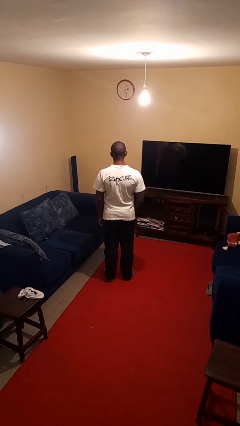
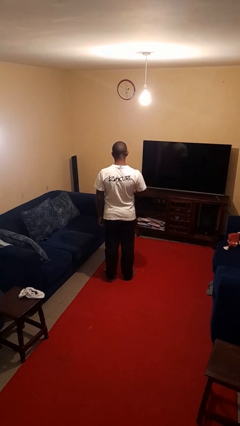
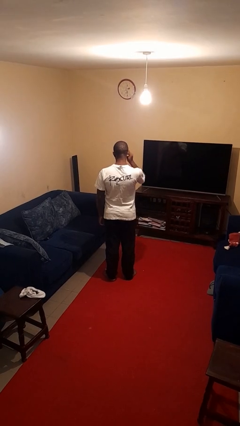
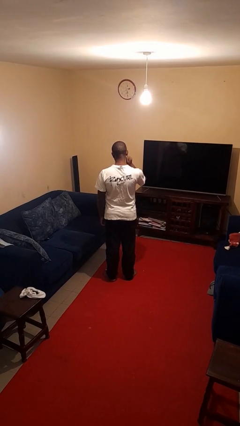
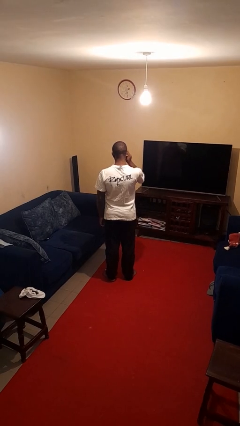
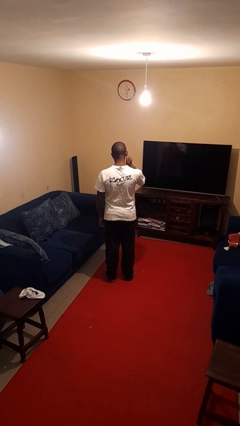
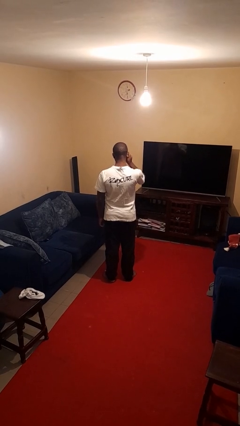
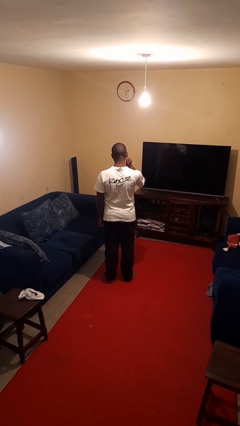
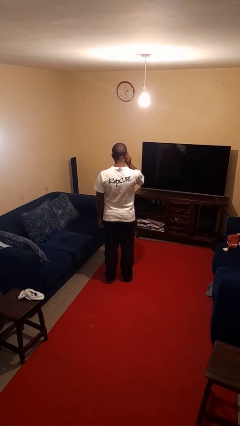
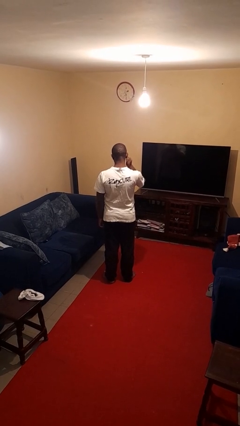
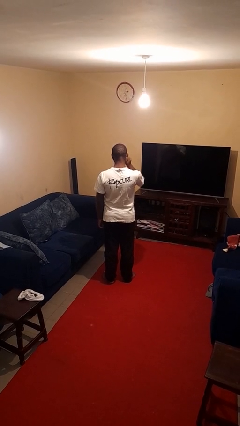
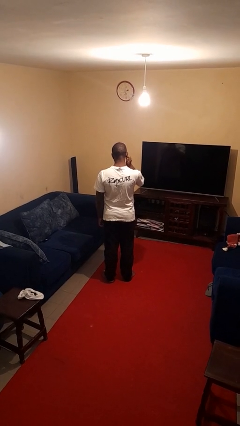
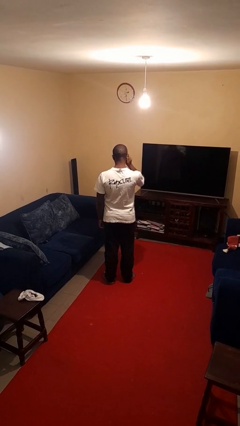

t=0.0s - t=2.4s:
person touches earlobe

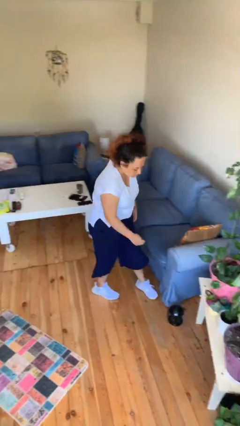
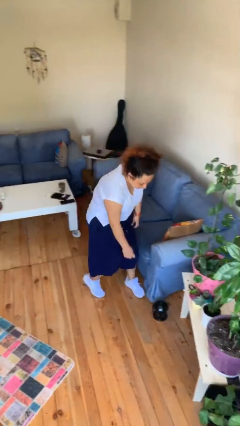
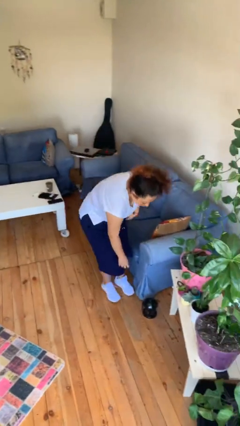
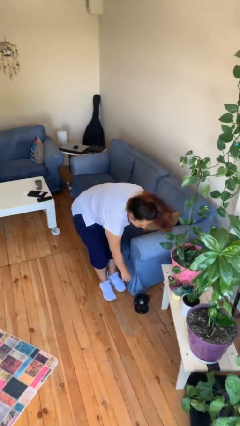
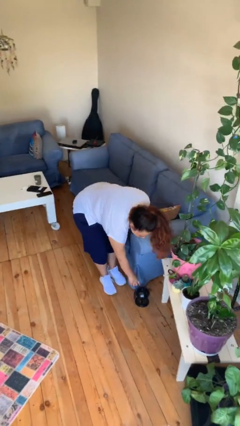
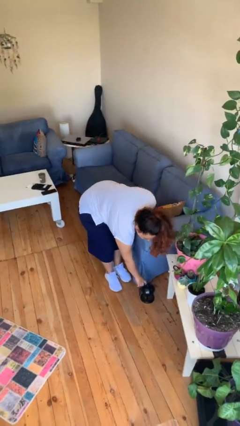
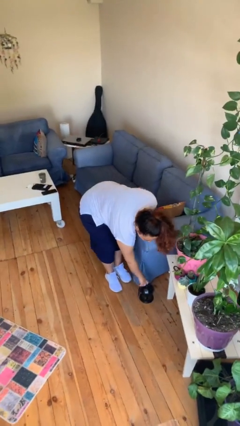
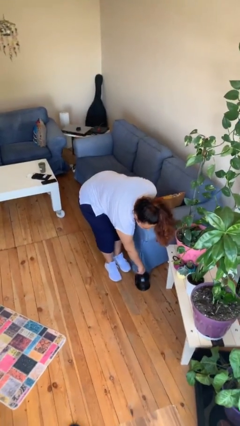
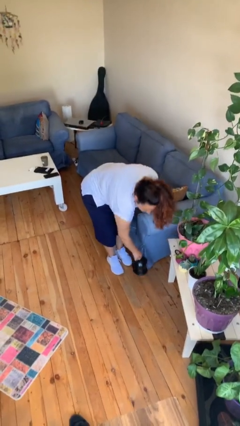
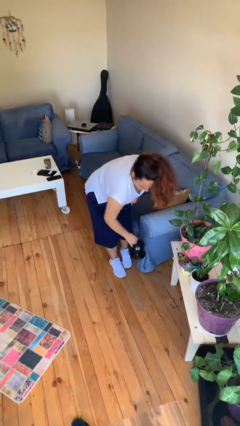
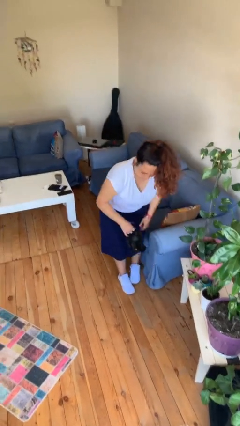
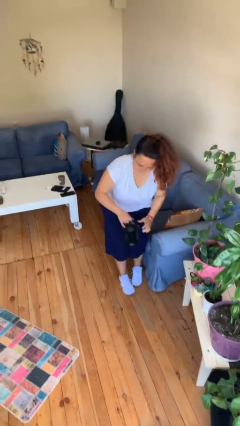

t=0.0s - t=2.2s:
person picks up object from floor

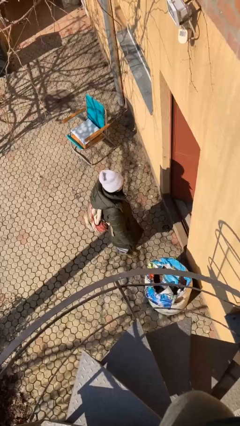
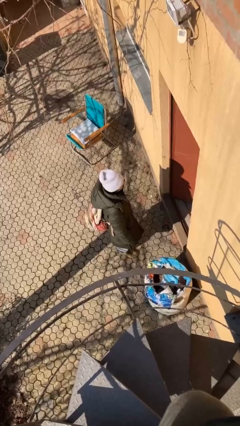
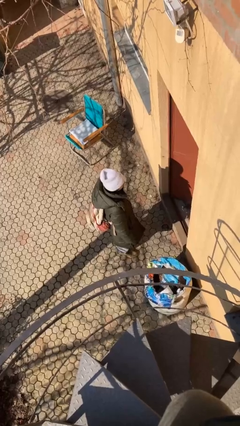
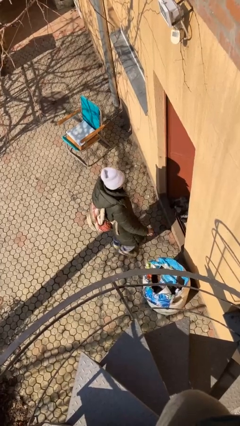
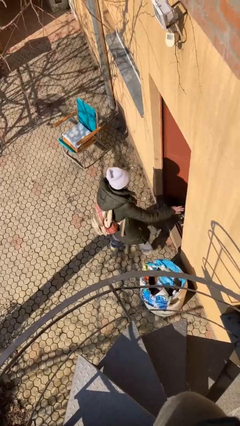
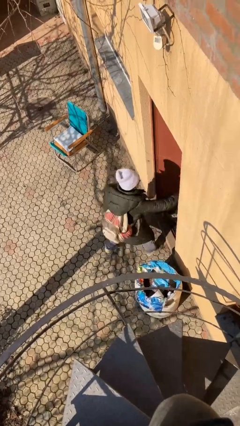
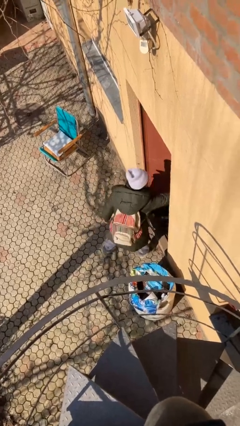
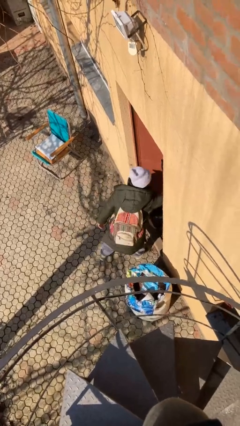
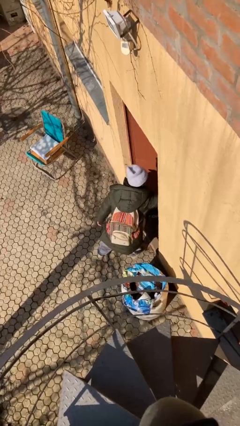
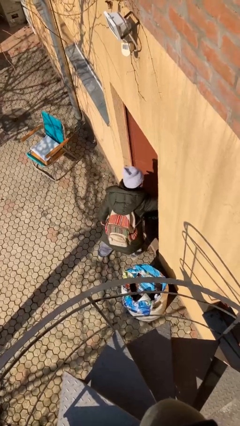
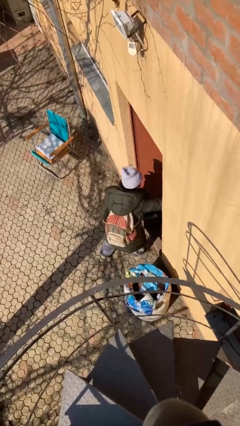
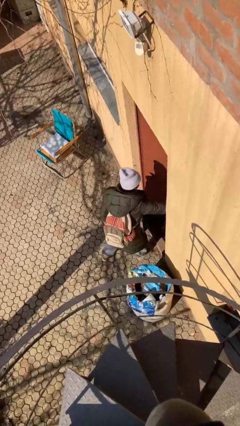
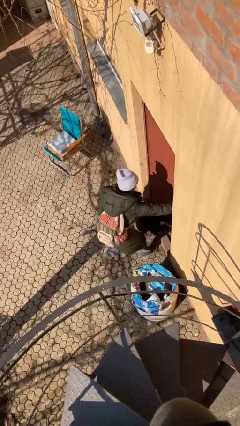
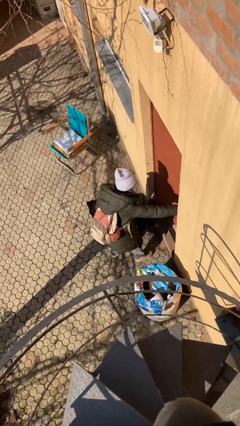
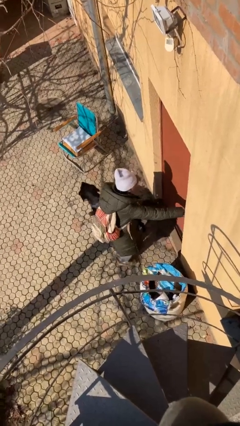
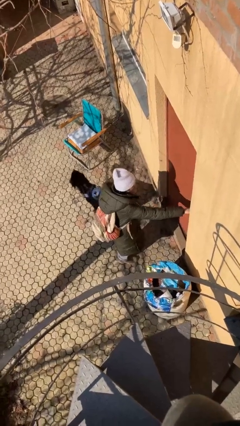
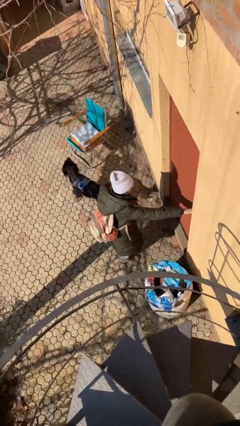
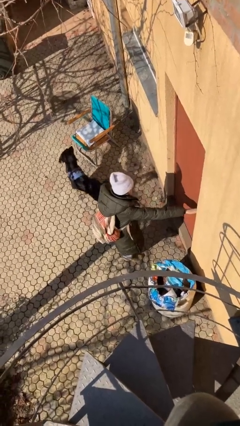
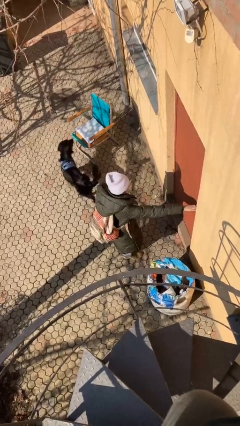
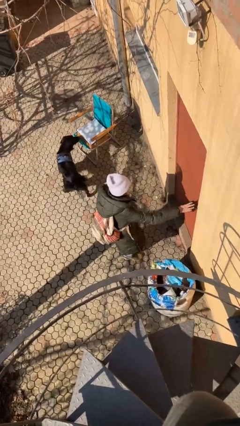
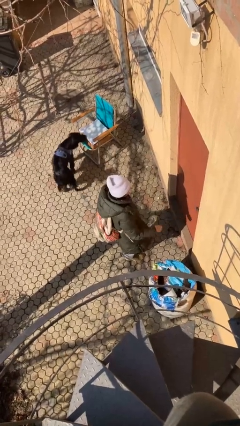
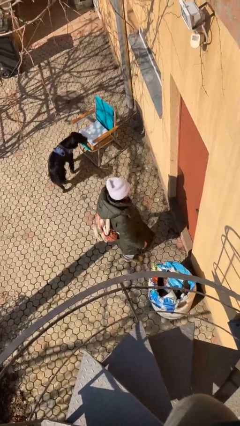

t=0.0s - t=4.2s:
person closes facility door

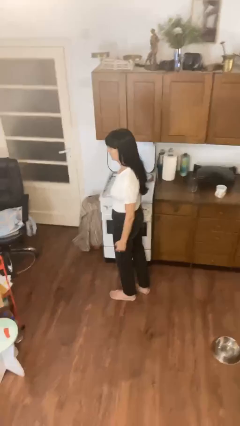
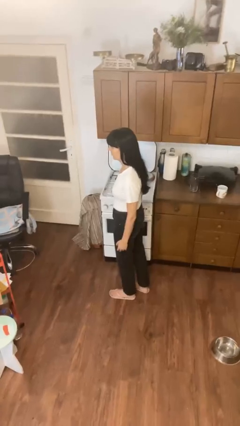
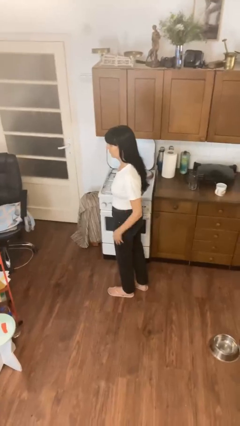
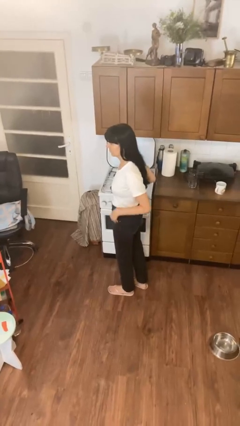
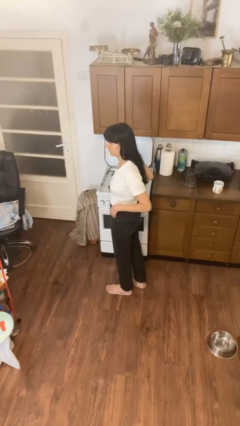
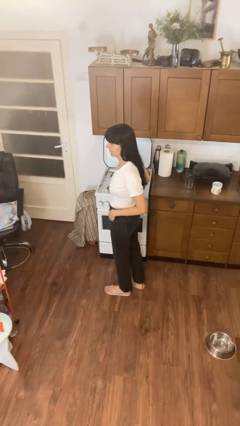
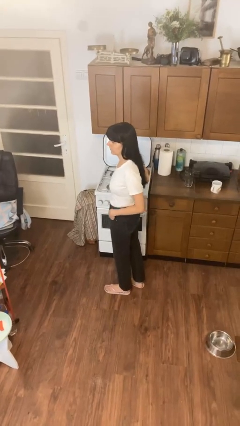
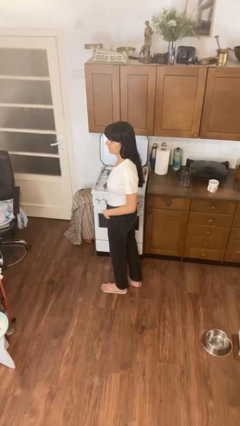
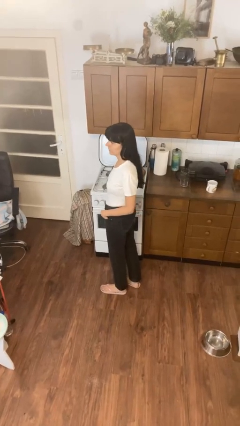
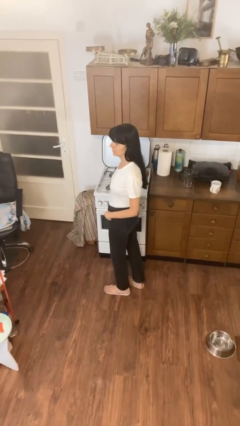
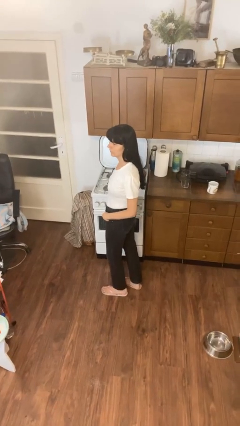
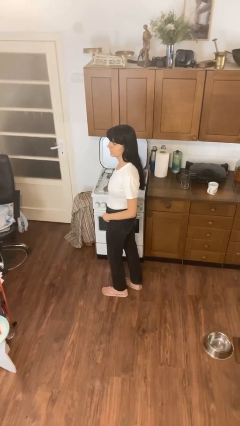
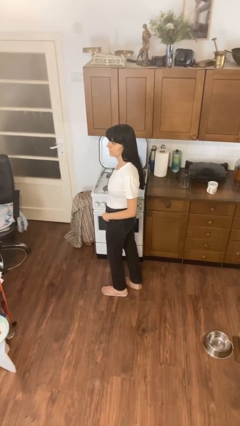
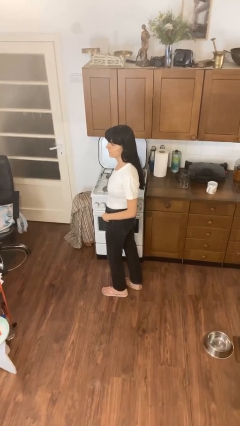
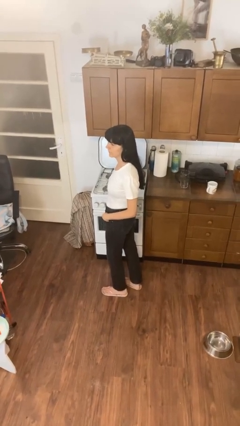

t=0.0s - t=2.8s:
person puts hands in back pockets

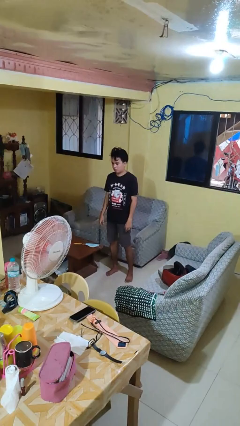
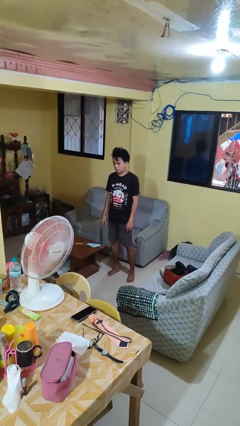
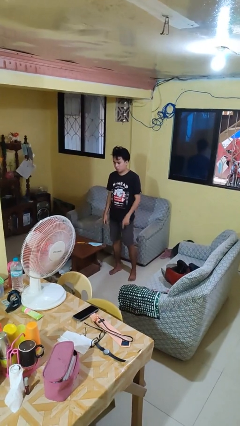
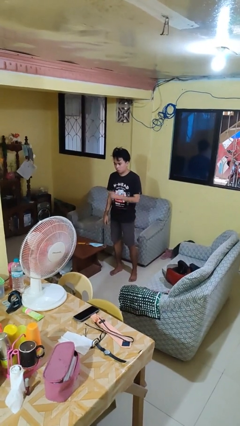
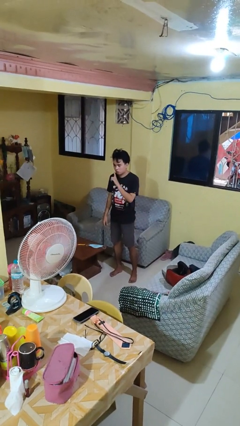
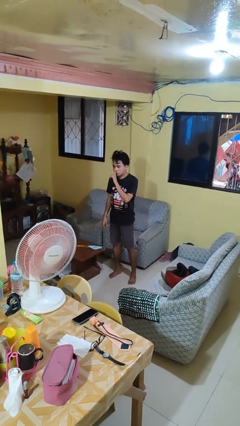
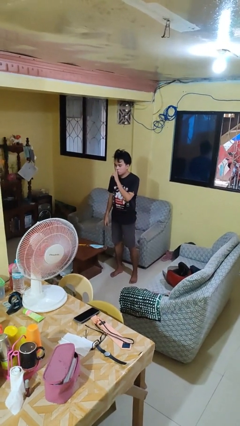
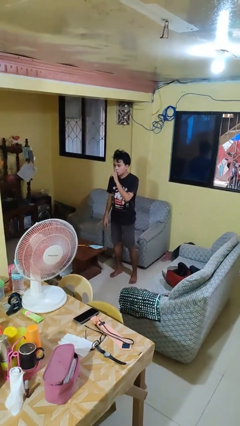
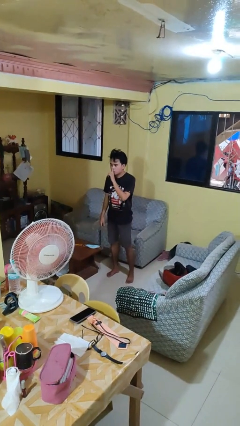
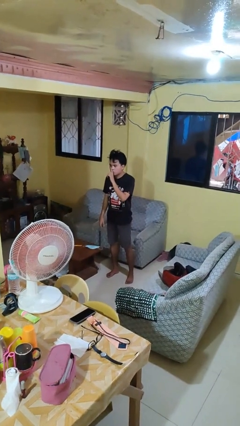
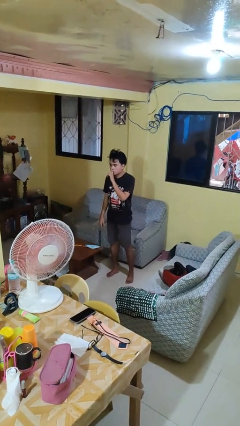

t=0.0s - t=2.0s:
person gestures be quiet

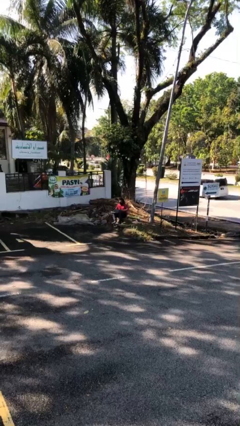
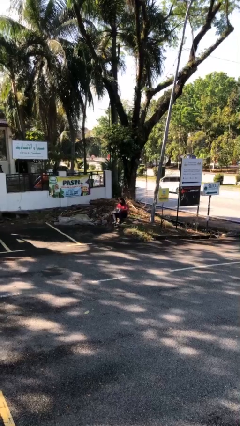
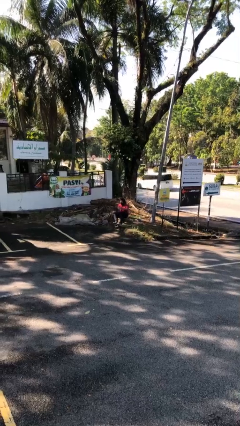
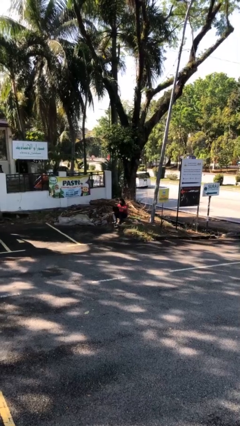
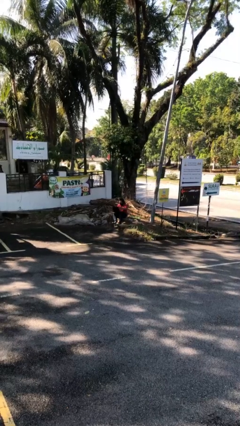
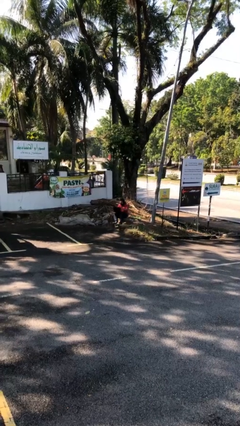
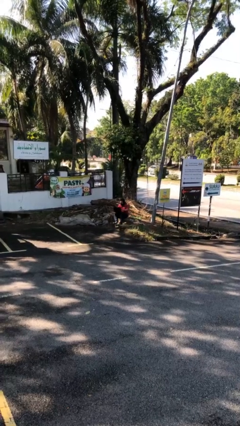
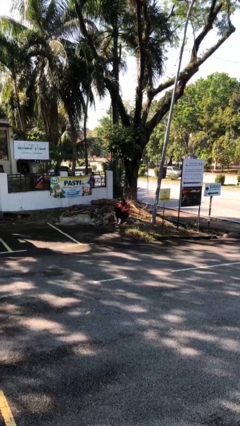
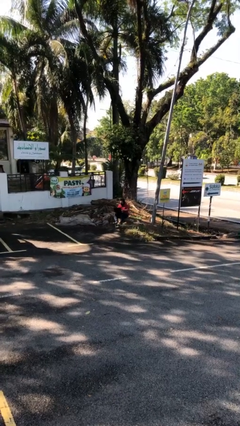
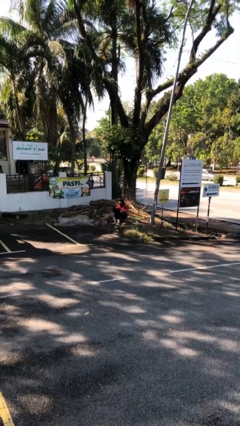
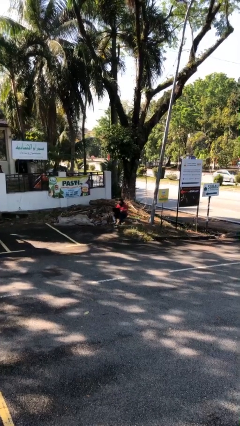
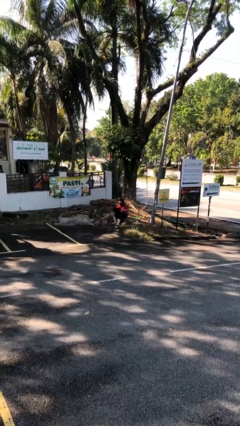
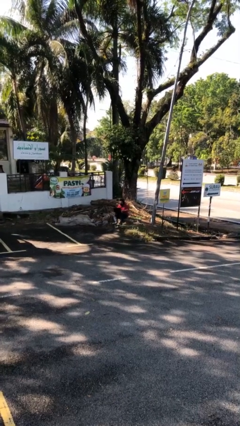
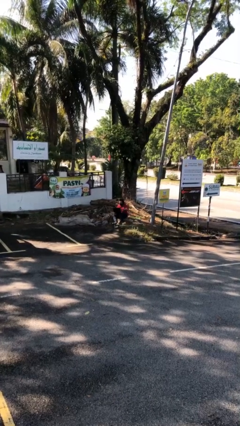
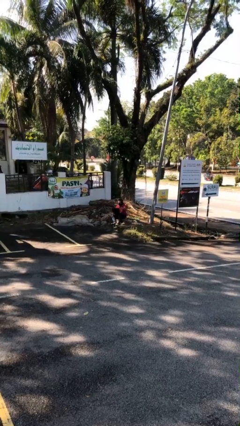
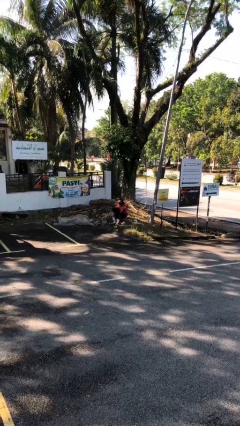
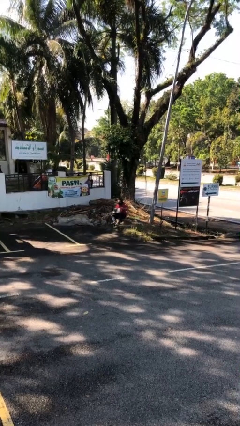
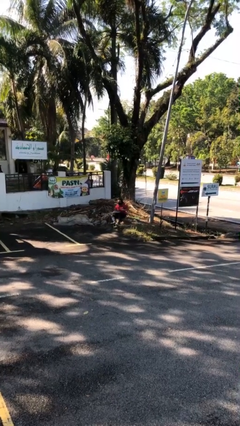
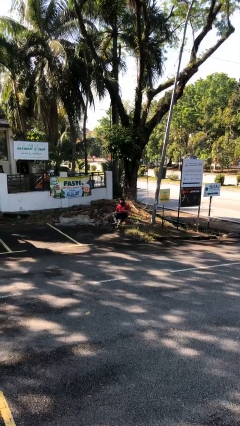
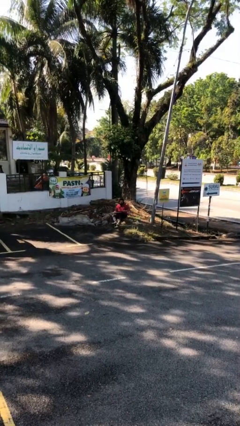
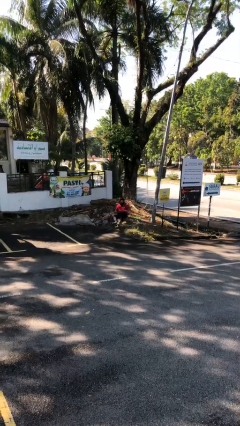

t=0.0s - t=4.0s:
person interacts with laptop
